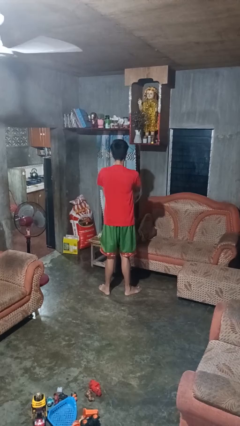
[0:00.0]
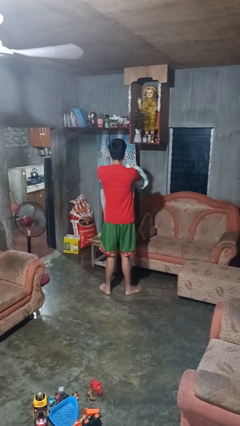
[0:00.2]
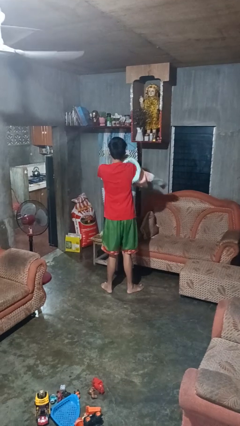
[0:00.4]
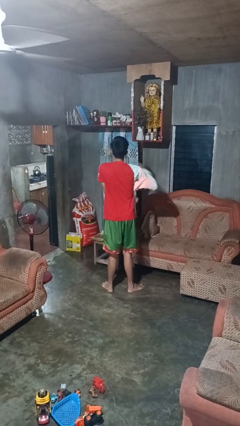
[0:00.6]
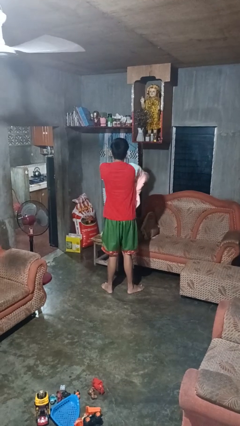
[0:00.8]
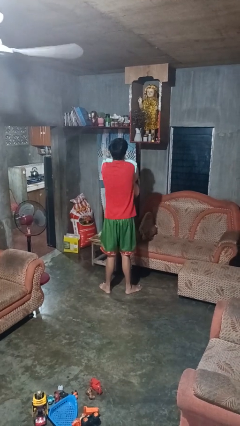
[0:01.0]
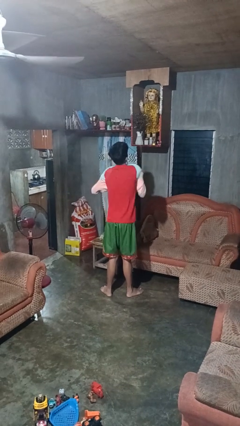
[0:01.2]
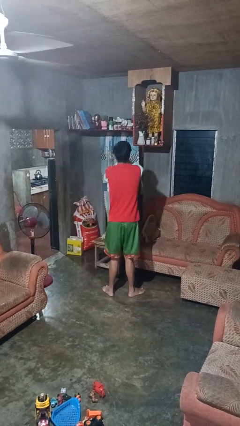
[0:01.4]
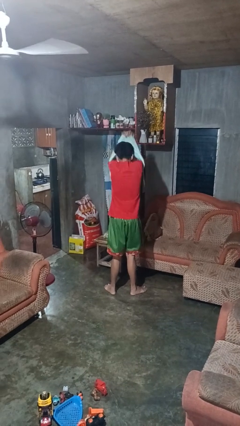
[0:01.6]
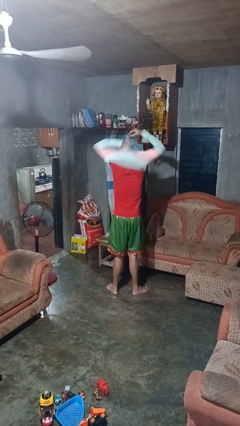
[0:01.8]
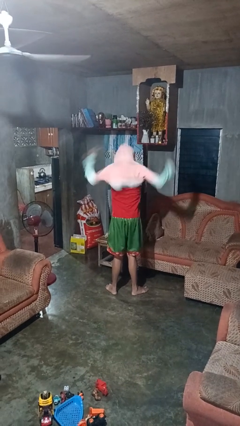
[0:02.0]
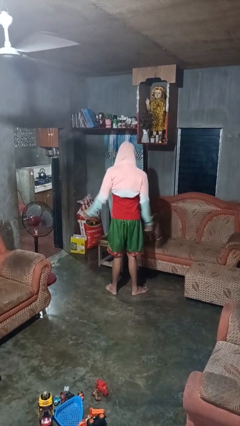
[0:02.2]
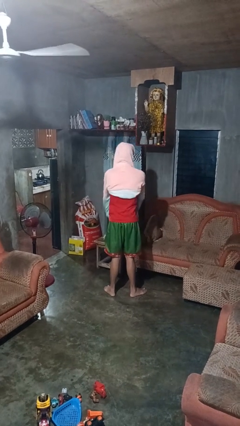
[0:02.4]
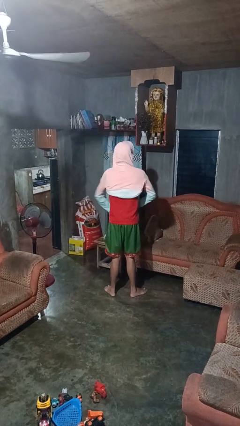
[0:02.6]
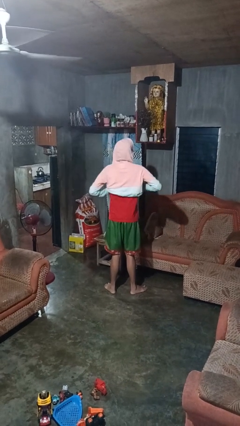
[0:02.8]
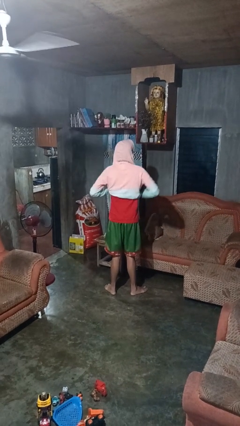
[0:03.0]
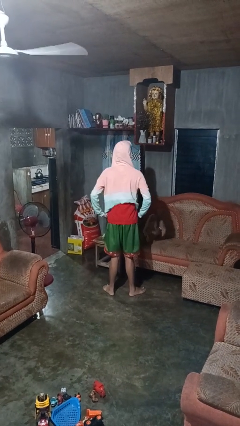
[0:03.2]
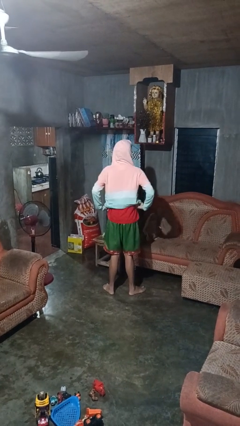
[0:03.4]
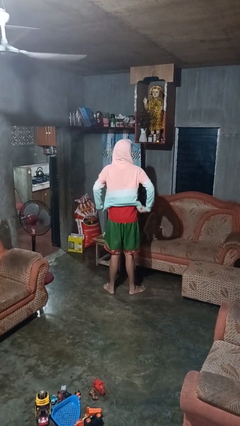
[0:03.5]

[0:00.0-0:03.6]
person puts on hoodie

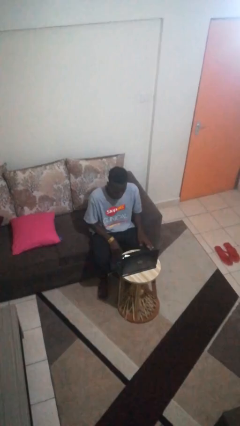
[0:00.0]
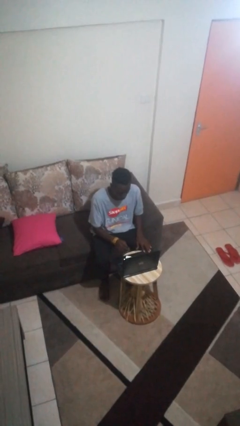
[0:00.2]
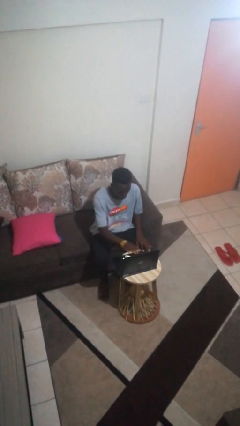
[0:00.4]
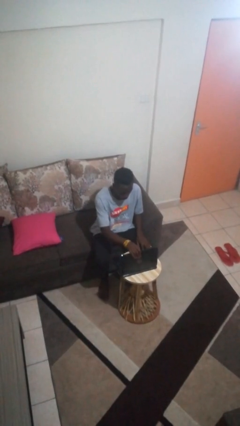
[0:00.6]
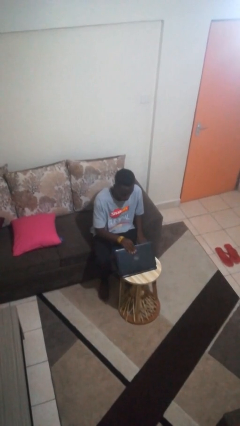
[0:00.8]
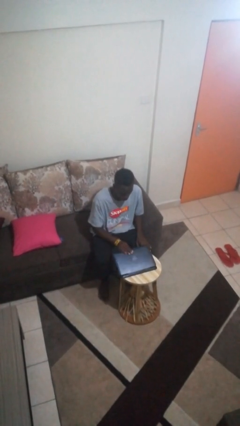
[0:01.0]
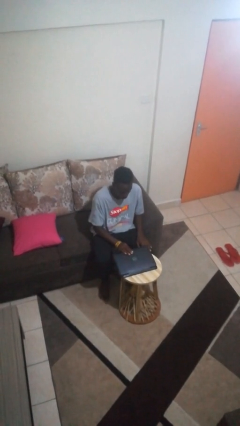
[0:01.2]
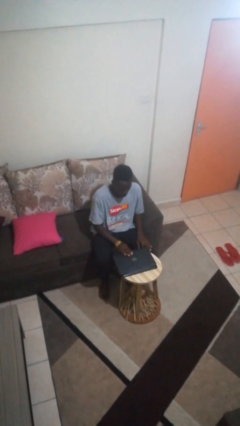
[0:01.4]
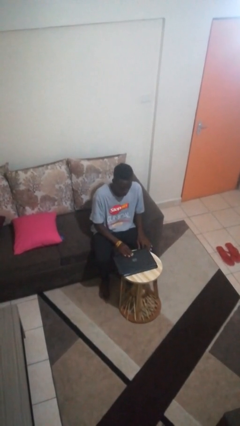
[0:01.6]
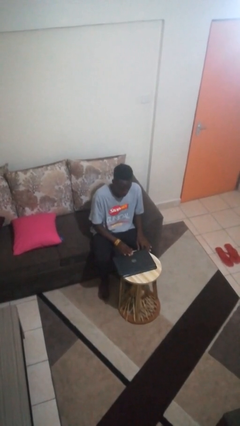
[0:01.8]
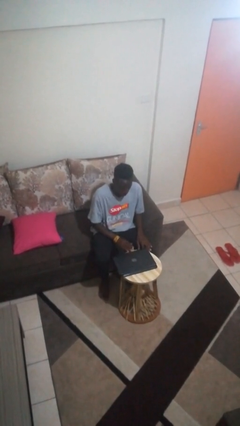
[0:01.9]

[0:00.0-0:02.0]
person closes laptop

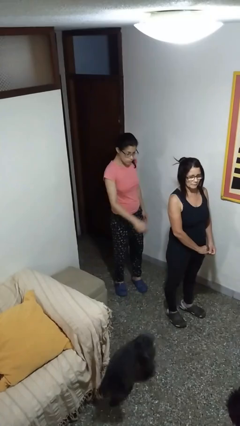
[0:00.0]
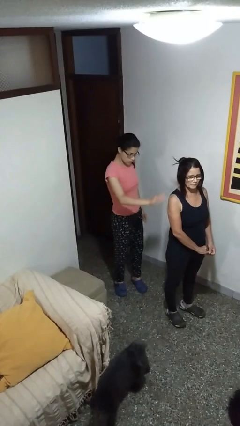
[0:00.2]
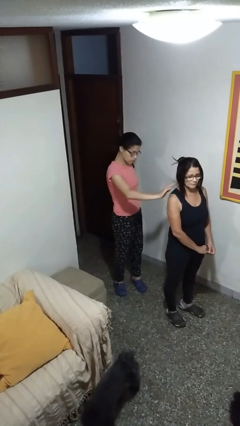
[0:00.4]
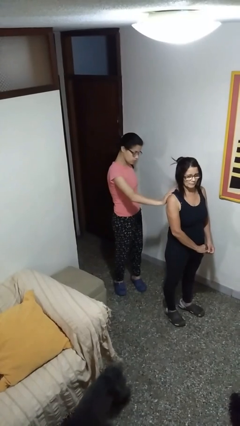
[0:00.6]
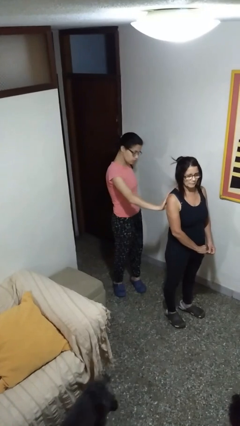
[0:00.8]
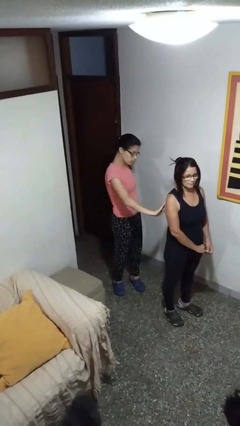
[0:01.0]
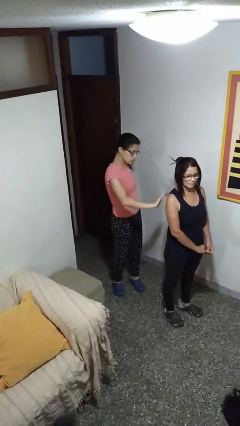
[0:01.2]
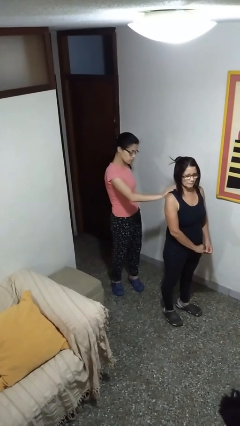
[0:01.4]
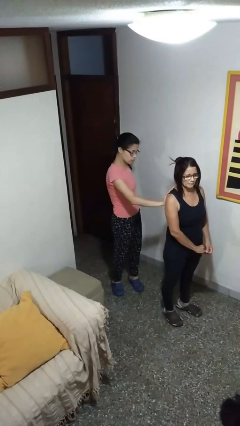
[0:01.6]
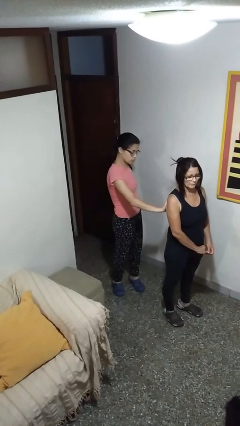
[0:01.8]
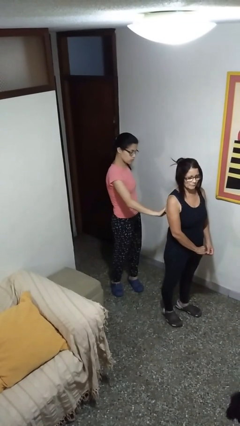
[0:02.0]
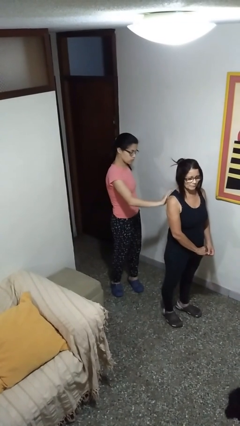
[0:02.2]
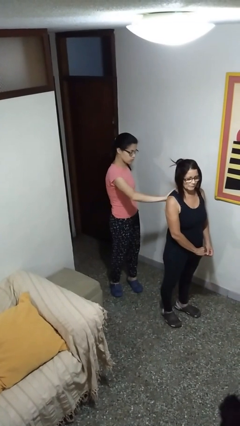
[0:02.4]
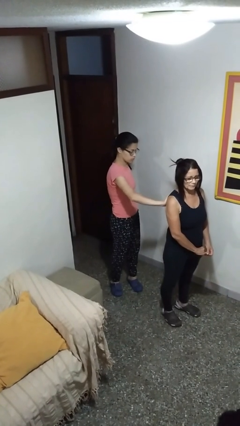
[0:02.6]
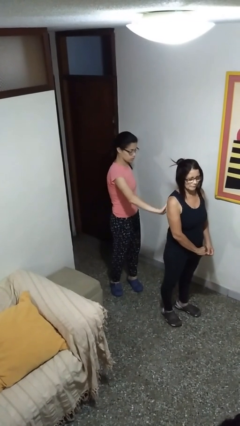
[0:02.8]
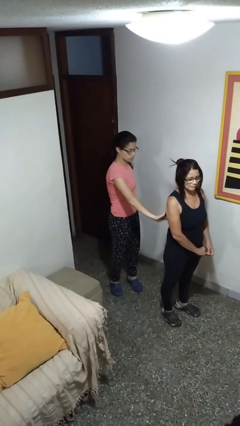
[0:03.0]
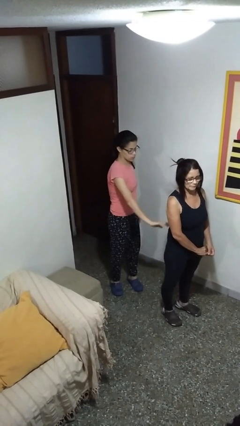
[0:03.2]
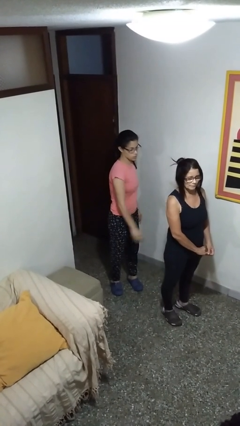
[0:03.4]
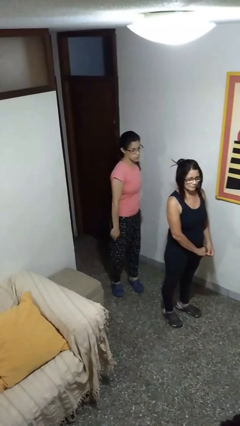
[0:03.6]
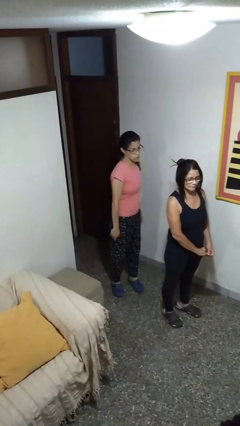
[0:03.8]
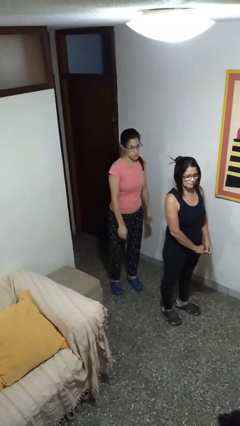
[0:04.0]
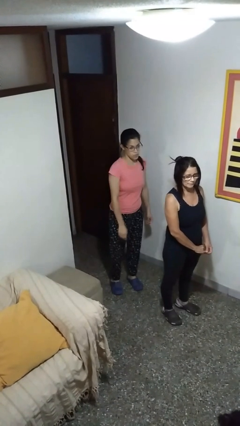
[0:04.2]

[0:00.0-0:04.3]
person touches back of person

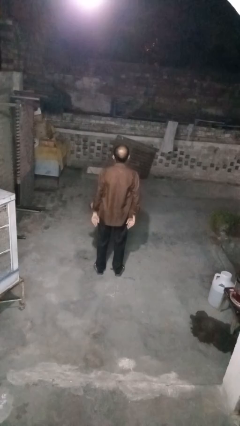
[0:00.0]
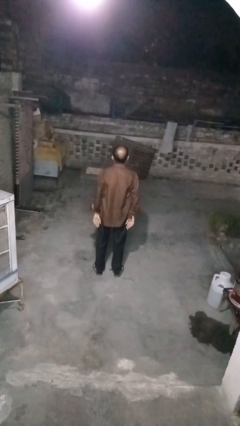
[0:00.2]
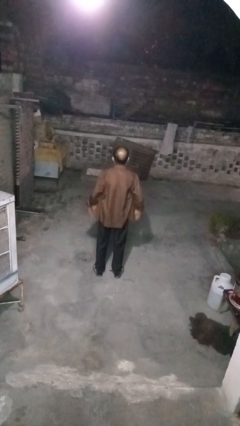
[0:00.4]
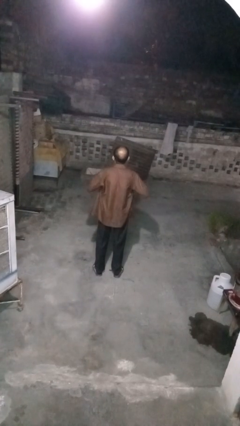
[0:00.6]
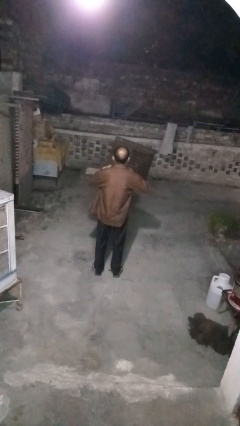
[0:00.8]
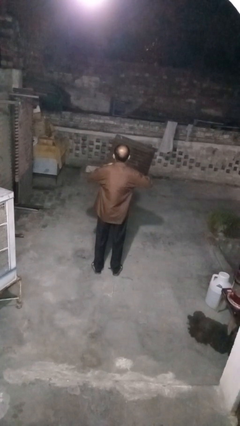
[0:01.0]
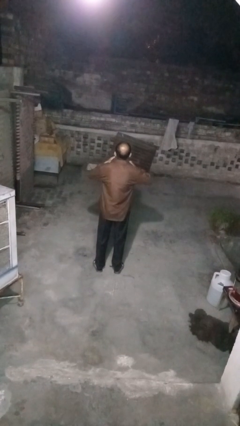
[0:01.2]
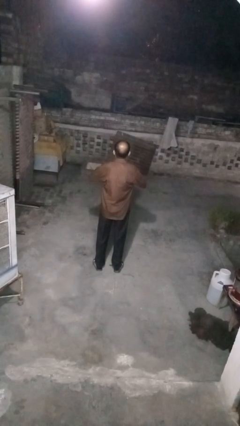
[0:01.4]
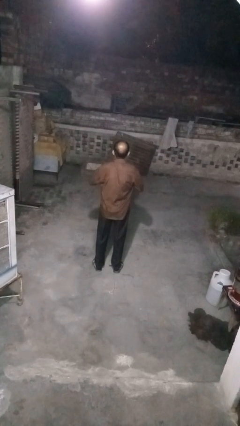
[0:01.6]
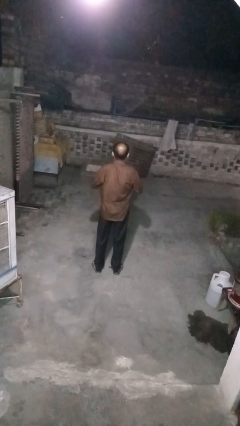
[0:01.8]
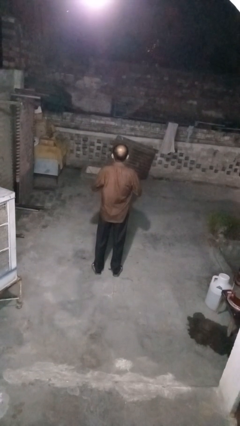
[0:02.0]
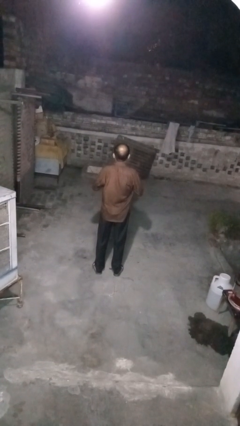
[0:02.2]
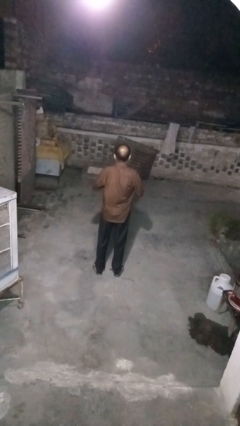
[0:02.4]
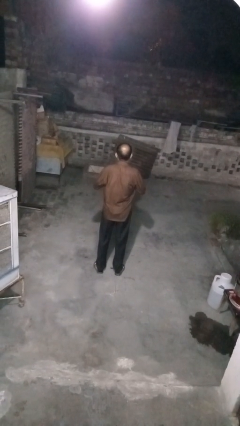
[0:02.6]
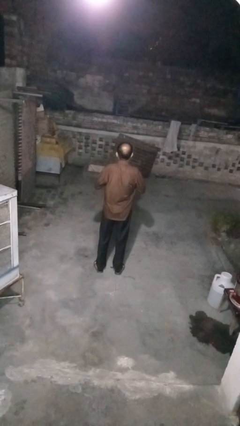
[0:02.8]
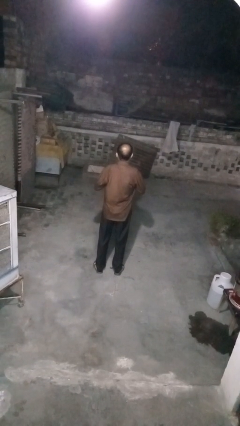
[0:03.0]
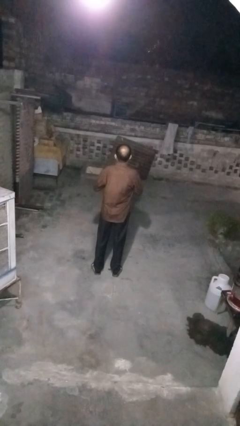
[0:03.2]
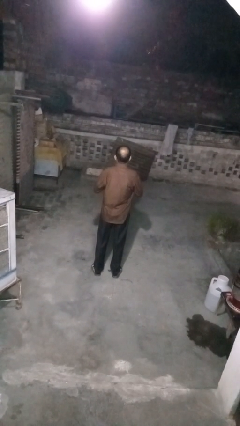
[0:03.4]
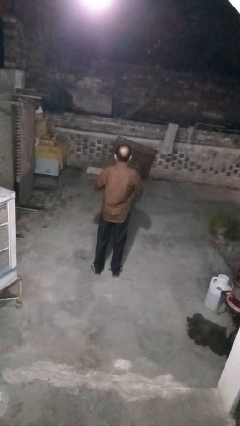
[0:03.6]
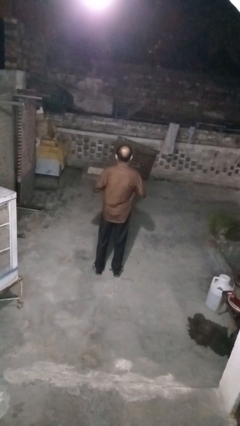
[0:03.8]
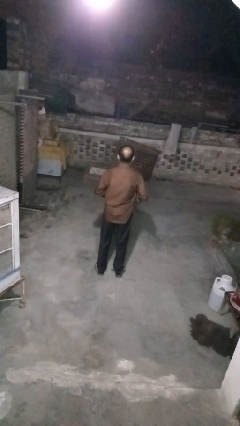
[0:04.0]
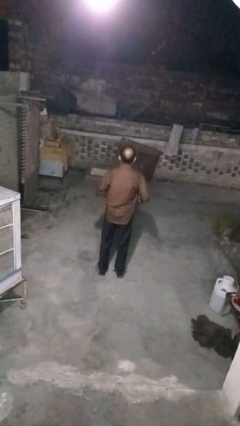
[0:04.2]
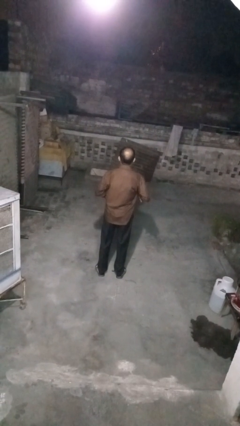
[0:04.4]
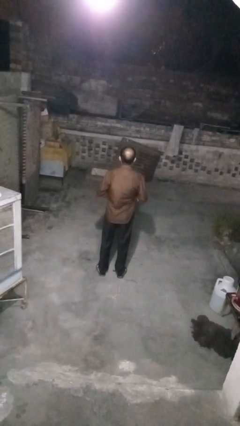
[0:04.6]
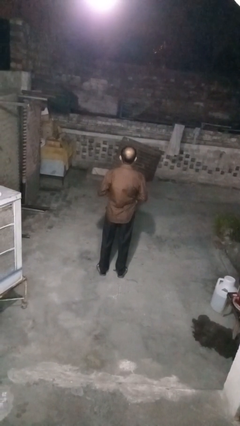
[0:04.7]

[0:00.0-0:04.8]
person buttons shirt

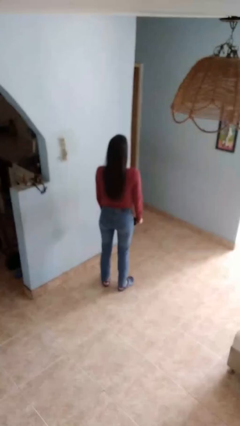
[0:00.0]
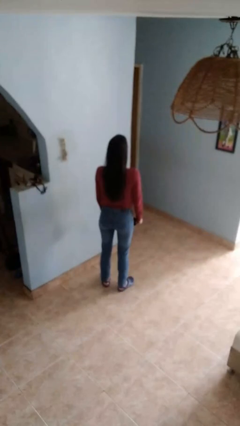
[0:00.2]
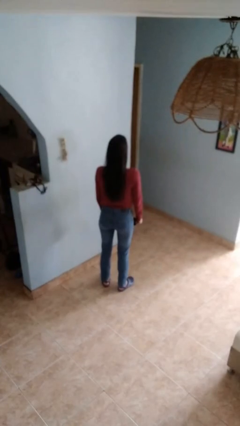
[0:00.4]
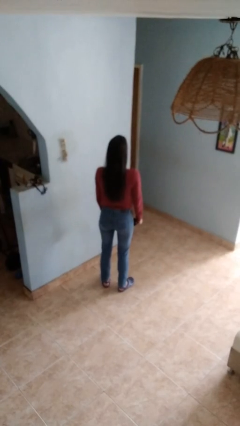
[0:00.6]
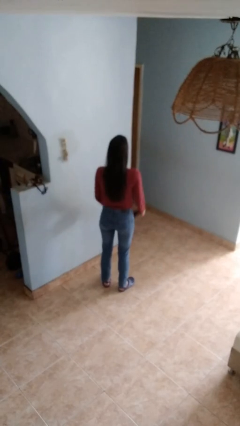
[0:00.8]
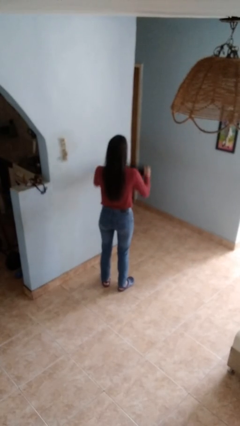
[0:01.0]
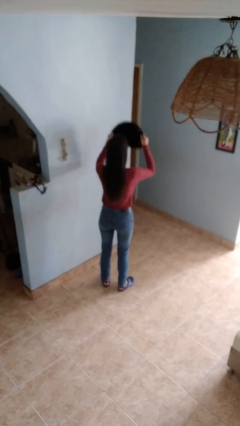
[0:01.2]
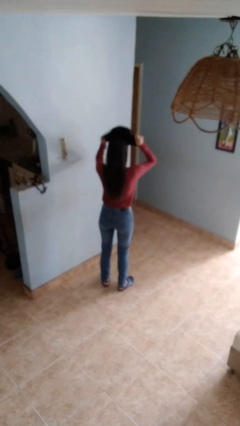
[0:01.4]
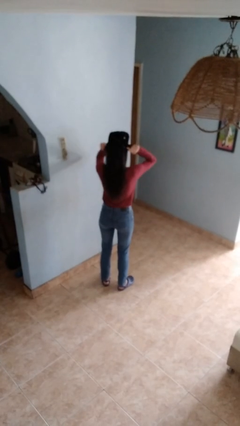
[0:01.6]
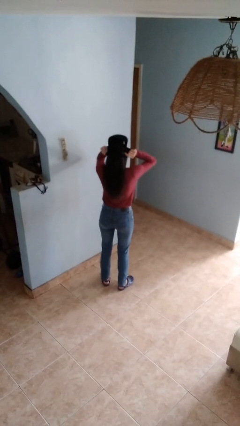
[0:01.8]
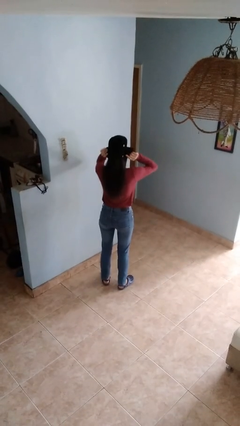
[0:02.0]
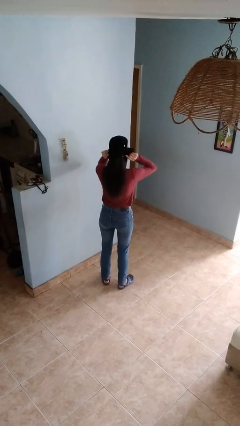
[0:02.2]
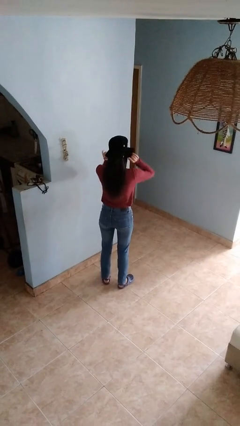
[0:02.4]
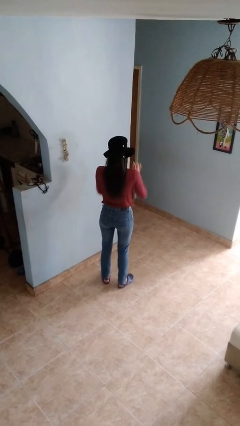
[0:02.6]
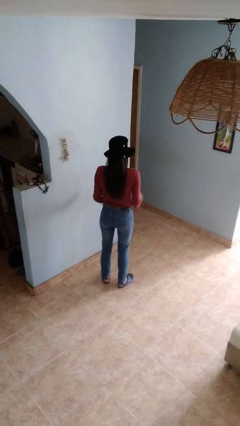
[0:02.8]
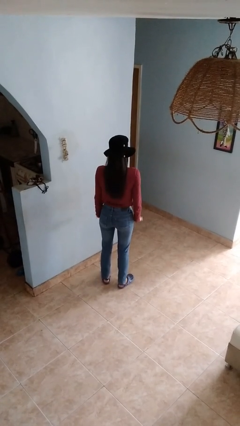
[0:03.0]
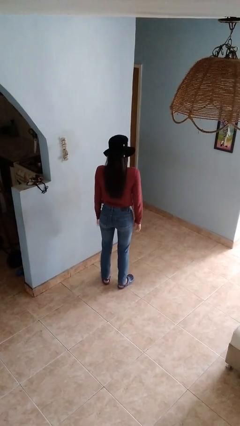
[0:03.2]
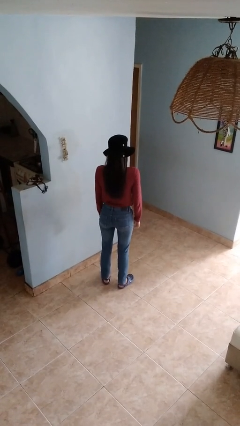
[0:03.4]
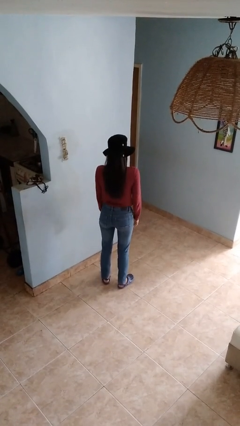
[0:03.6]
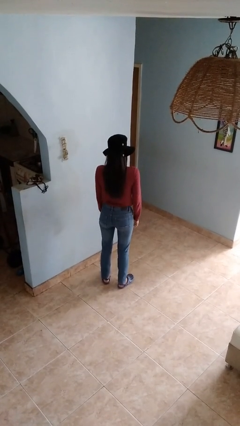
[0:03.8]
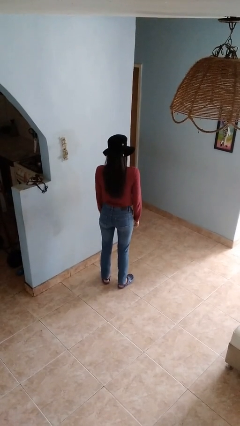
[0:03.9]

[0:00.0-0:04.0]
person puts on hat
